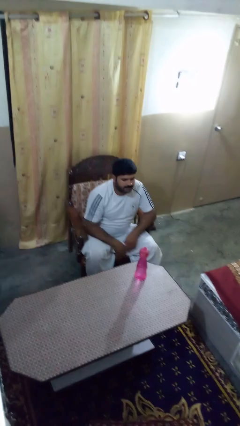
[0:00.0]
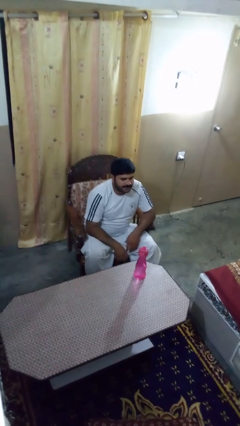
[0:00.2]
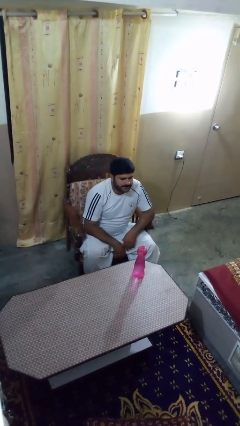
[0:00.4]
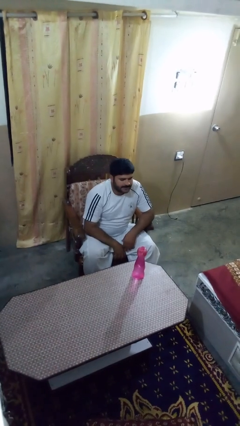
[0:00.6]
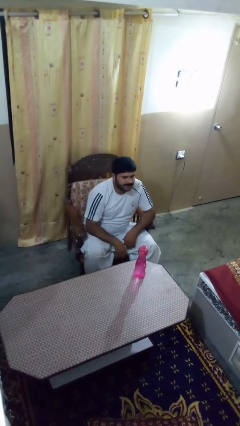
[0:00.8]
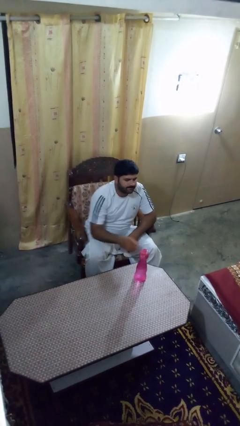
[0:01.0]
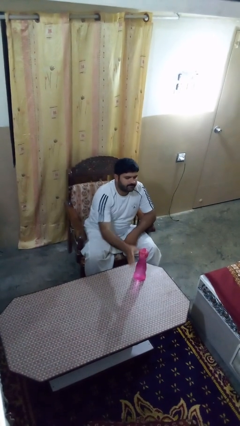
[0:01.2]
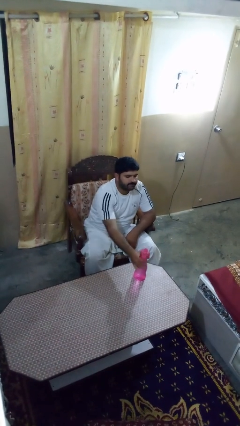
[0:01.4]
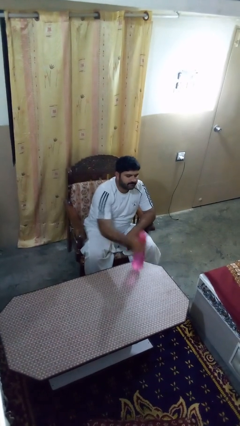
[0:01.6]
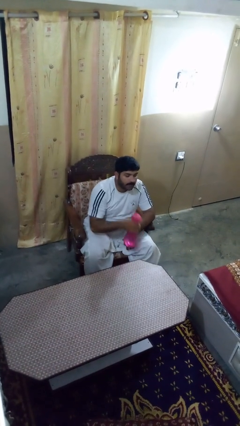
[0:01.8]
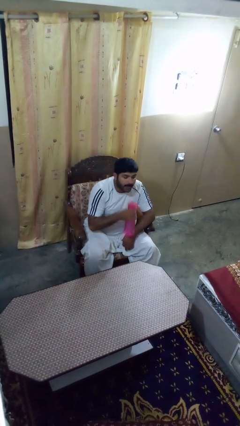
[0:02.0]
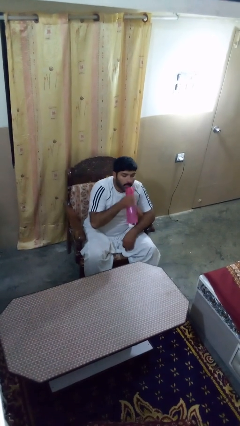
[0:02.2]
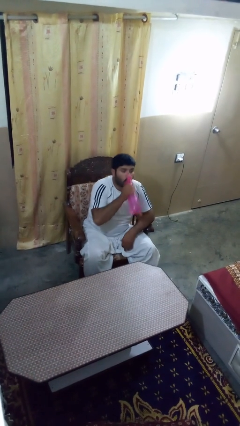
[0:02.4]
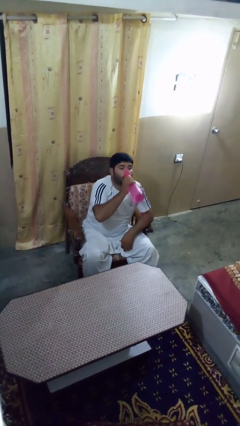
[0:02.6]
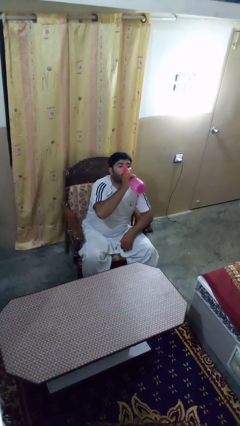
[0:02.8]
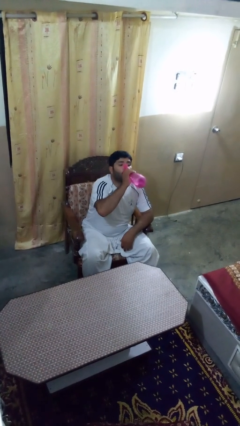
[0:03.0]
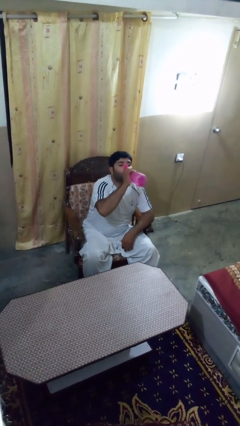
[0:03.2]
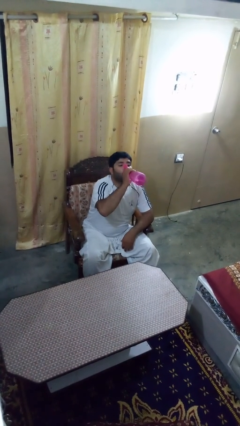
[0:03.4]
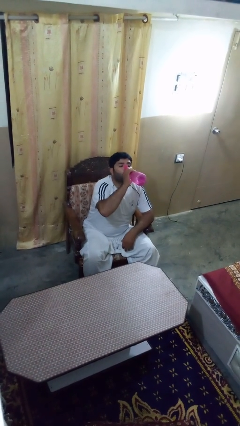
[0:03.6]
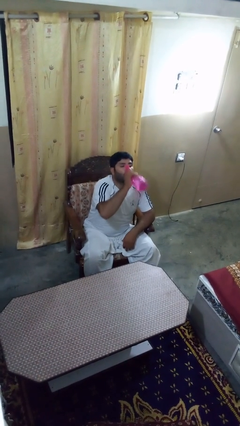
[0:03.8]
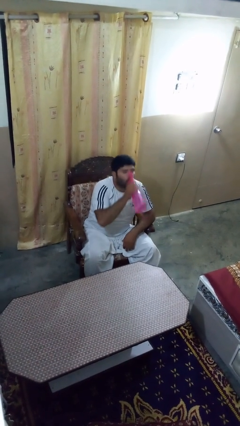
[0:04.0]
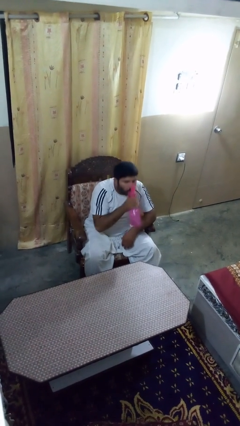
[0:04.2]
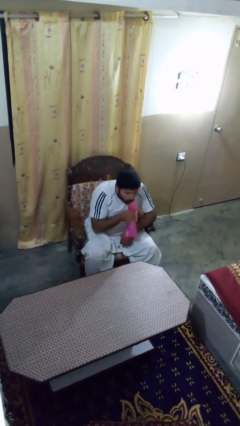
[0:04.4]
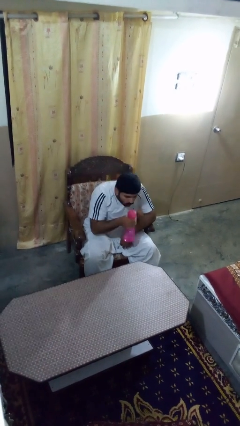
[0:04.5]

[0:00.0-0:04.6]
person drinks from bottle

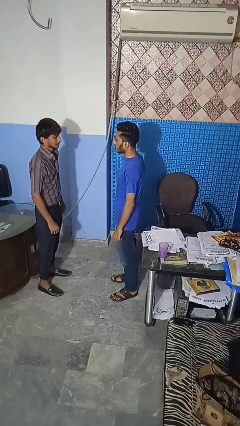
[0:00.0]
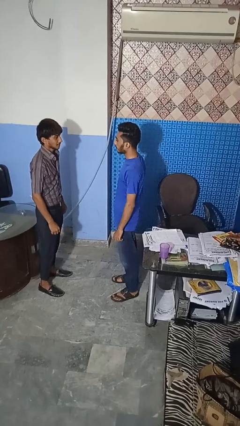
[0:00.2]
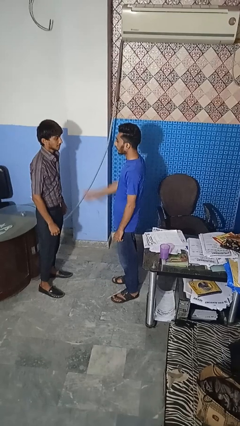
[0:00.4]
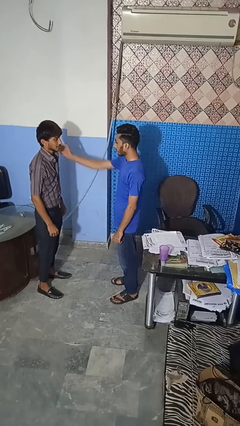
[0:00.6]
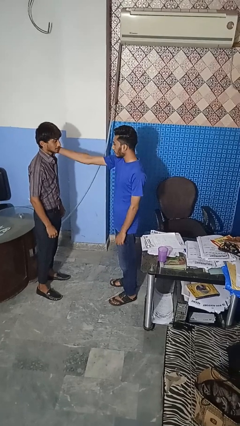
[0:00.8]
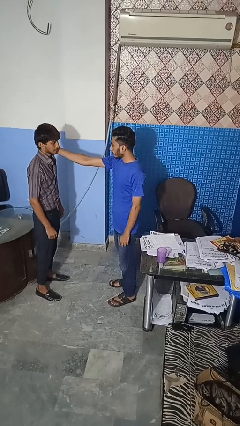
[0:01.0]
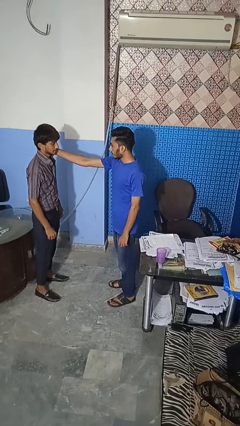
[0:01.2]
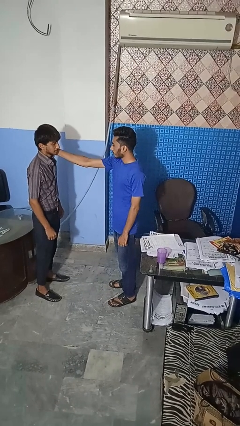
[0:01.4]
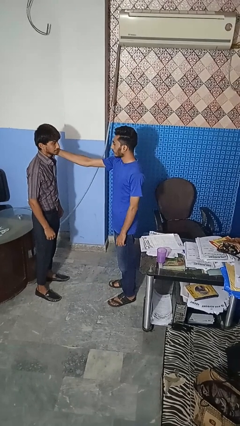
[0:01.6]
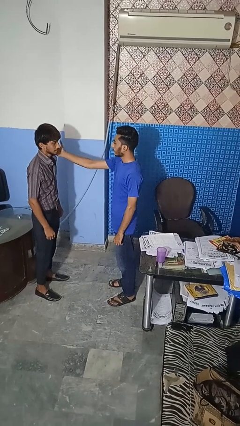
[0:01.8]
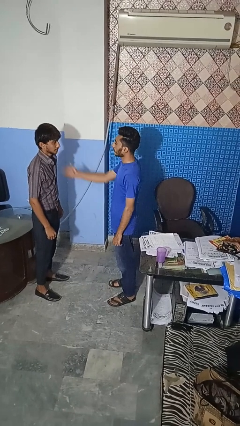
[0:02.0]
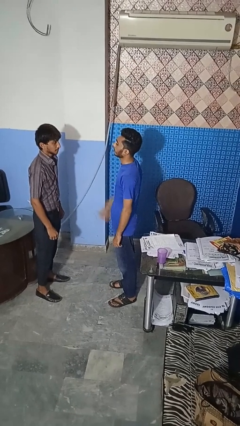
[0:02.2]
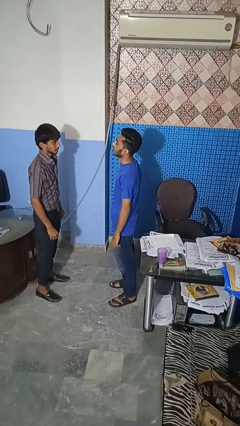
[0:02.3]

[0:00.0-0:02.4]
person touches face of person

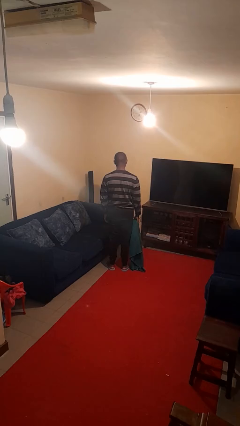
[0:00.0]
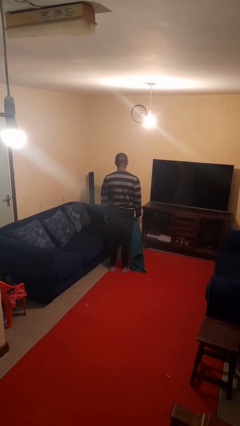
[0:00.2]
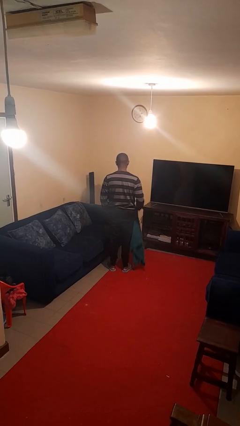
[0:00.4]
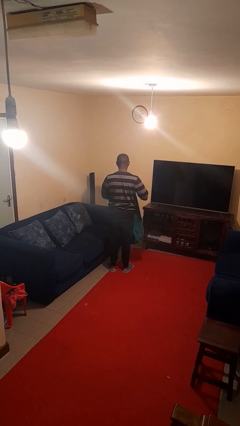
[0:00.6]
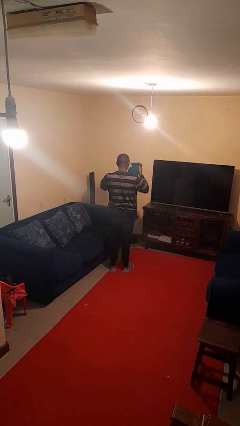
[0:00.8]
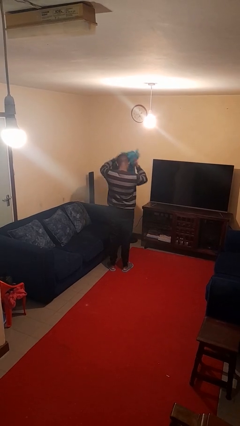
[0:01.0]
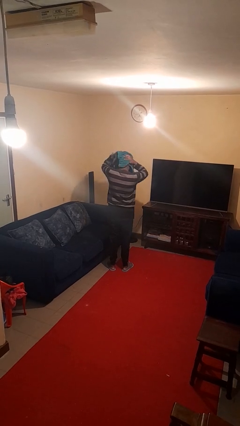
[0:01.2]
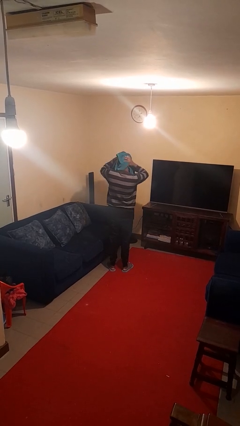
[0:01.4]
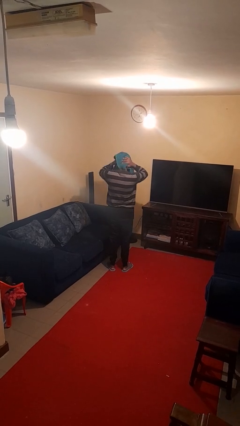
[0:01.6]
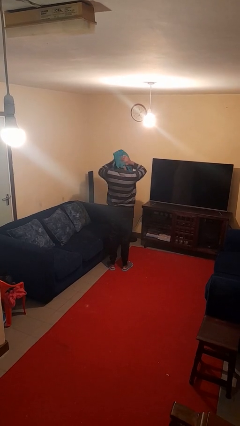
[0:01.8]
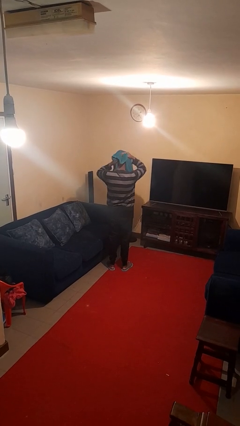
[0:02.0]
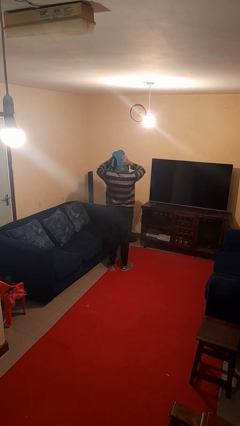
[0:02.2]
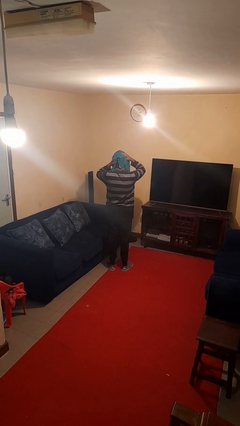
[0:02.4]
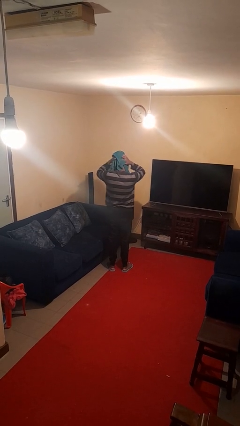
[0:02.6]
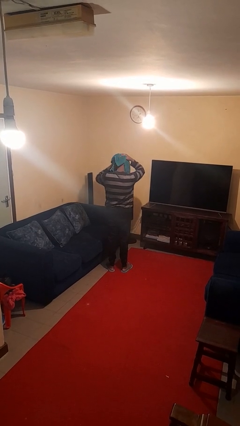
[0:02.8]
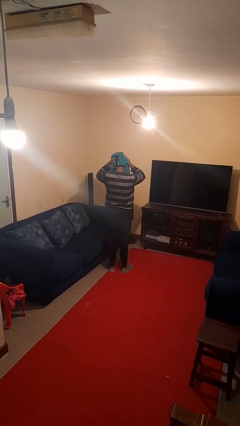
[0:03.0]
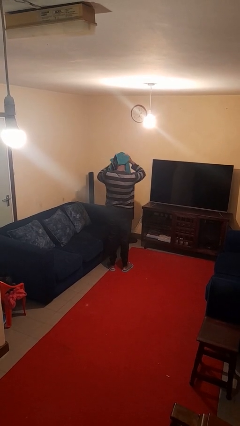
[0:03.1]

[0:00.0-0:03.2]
person dries hair with towel

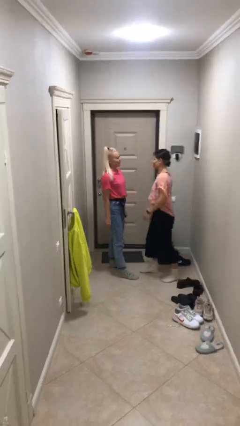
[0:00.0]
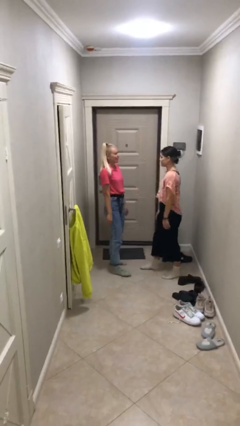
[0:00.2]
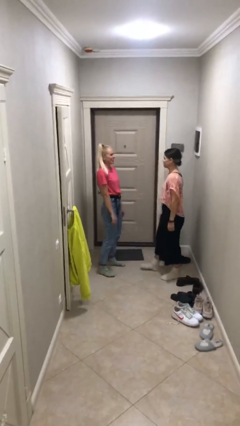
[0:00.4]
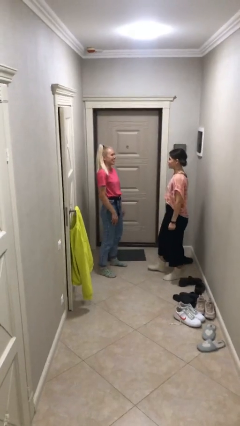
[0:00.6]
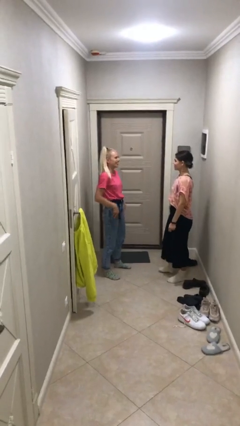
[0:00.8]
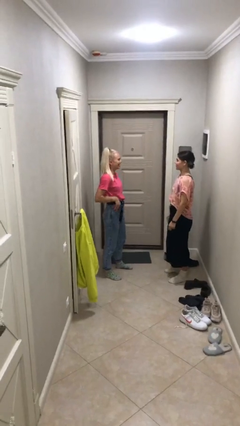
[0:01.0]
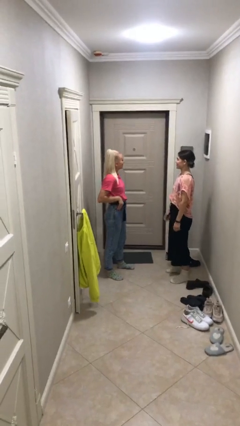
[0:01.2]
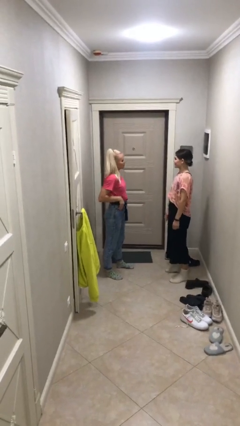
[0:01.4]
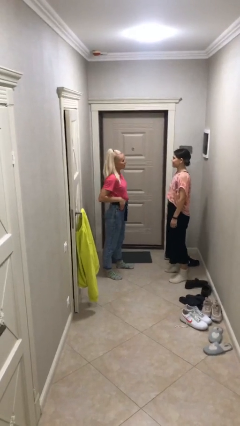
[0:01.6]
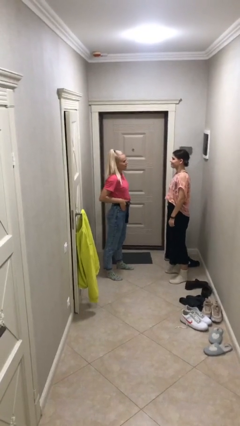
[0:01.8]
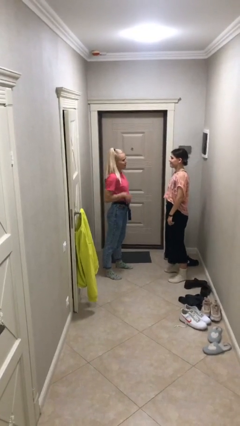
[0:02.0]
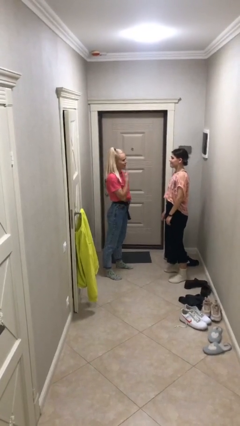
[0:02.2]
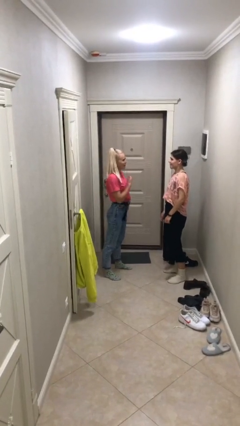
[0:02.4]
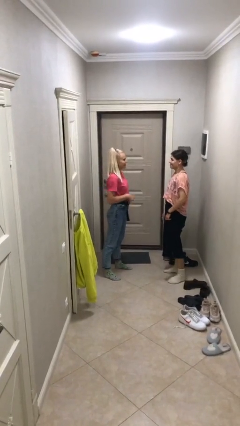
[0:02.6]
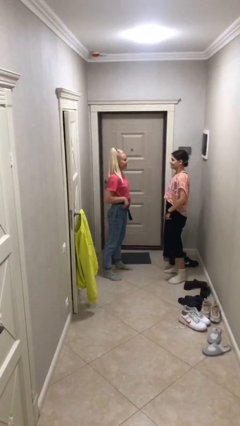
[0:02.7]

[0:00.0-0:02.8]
person talks to person

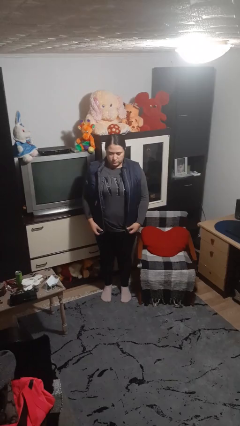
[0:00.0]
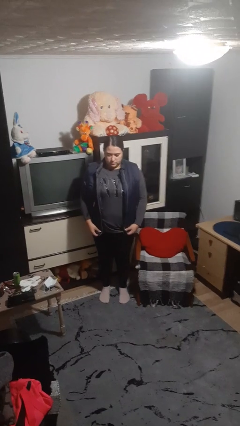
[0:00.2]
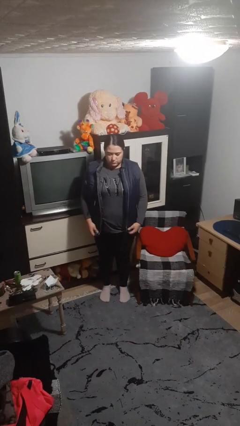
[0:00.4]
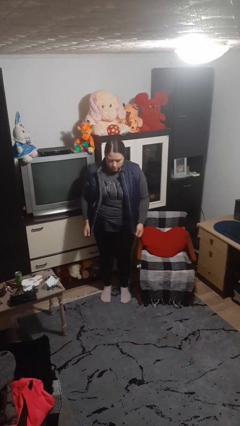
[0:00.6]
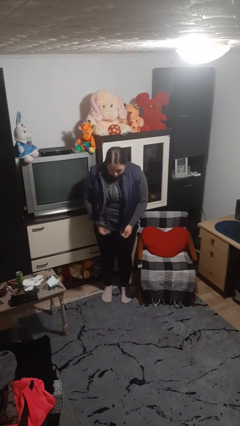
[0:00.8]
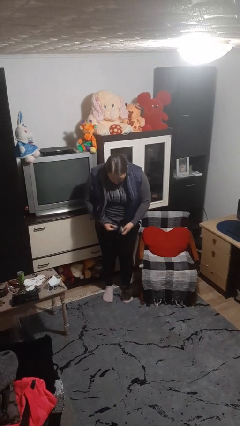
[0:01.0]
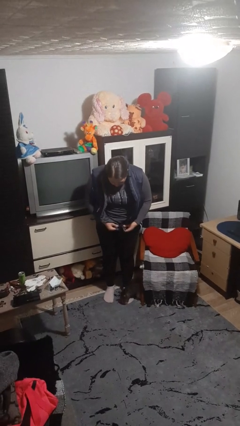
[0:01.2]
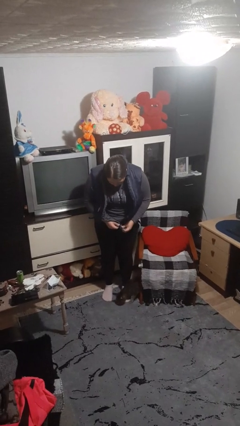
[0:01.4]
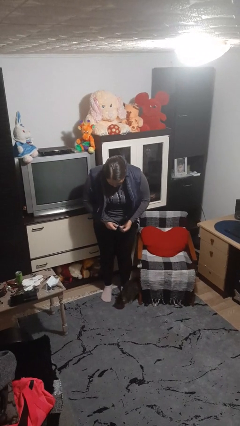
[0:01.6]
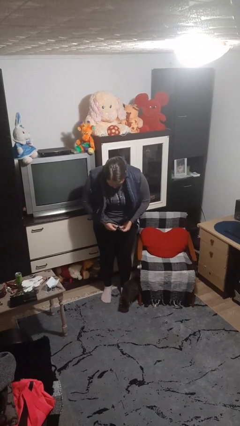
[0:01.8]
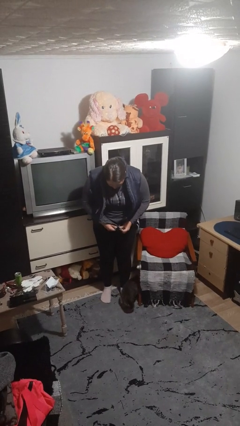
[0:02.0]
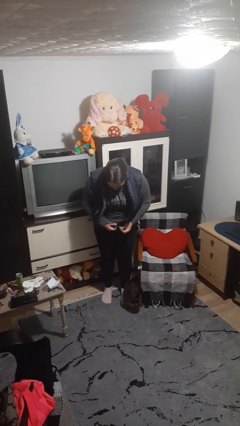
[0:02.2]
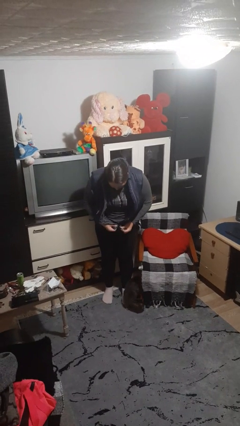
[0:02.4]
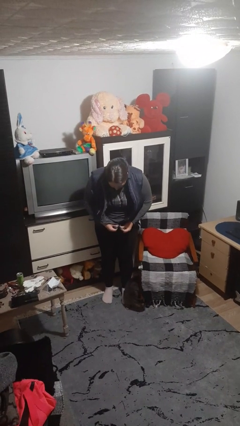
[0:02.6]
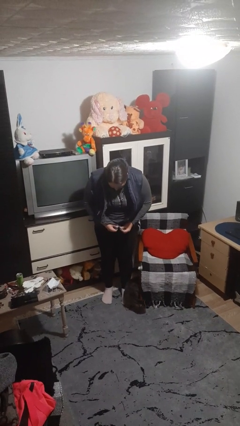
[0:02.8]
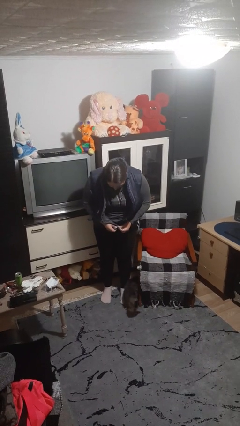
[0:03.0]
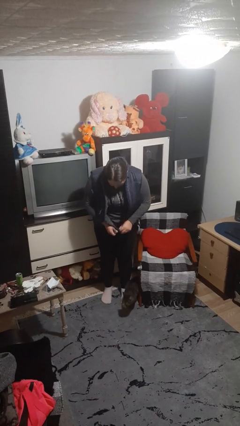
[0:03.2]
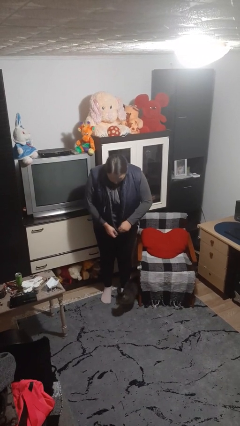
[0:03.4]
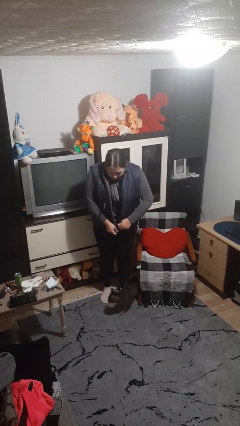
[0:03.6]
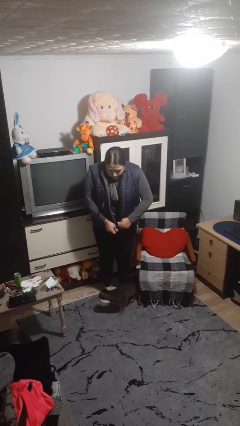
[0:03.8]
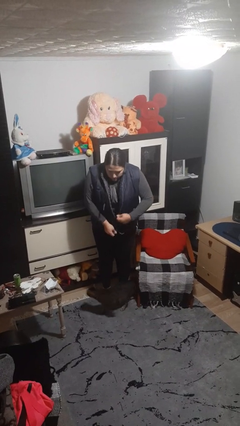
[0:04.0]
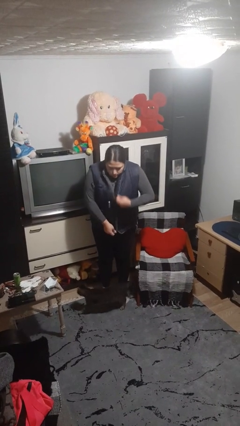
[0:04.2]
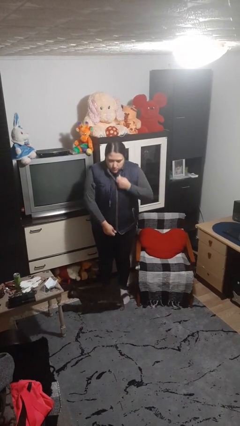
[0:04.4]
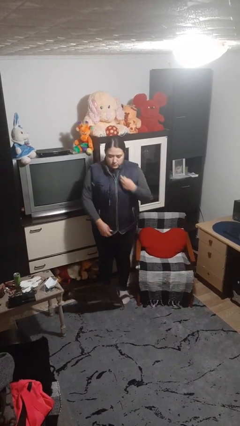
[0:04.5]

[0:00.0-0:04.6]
person zips up jacket

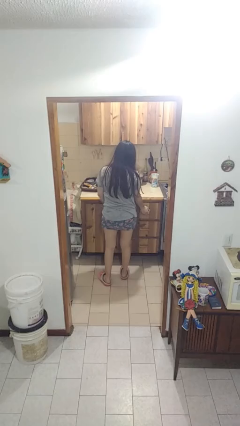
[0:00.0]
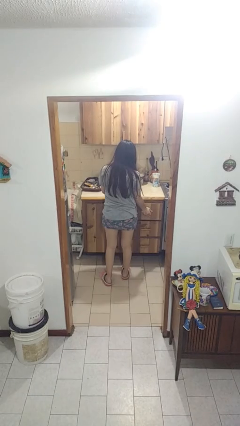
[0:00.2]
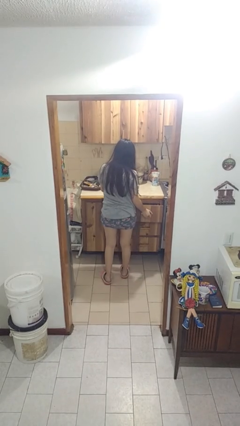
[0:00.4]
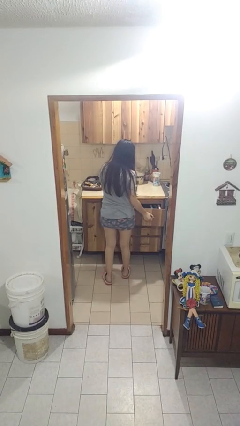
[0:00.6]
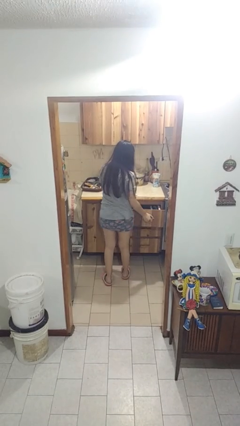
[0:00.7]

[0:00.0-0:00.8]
person opens kitchen drawer
